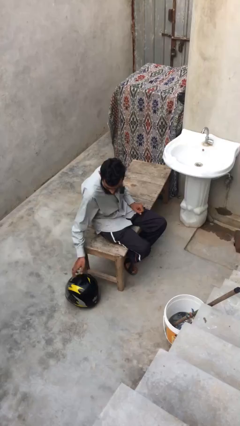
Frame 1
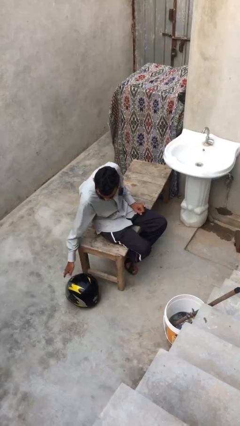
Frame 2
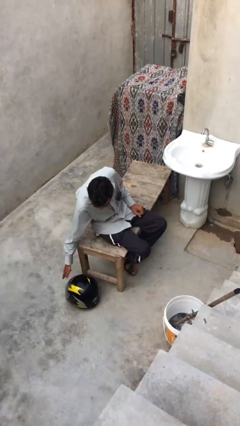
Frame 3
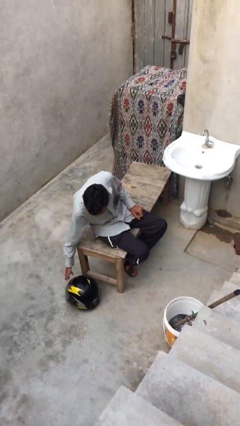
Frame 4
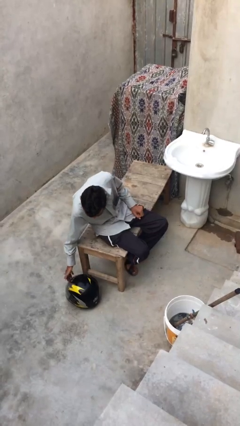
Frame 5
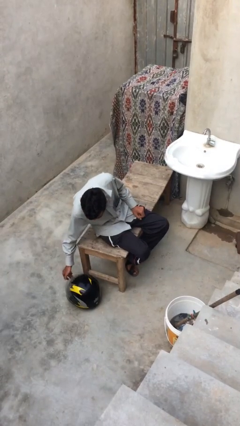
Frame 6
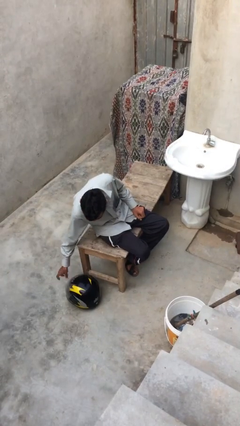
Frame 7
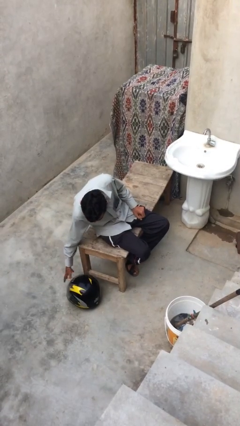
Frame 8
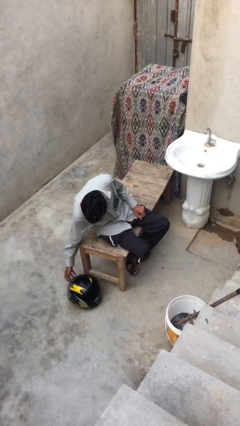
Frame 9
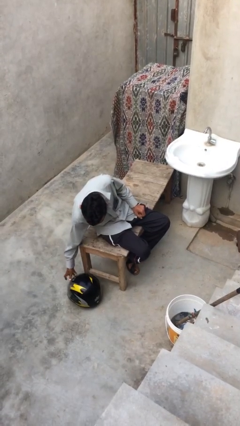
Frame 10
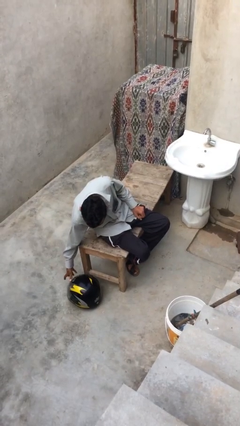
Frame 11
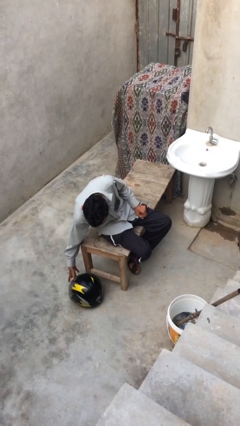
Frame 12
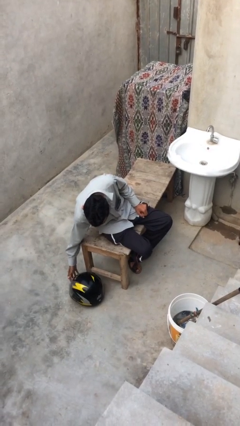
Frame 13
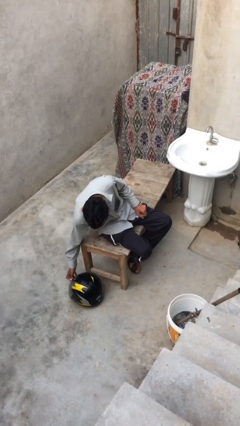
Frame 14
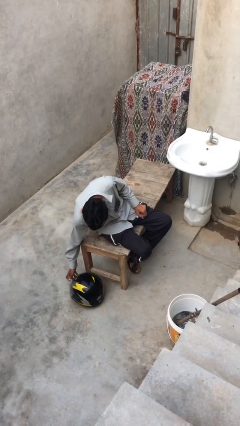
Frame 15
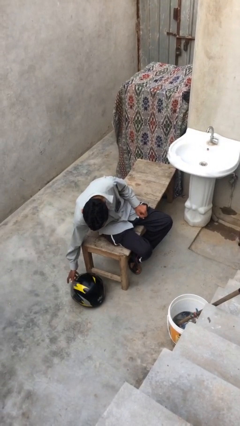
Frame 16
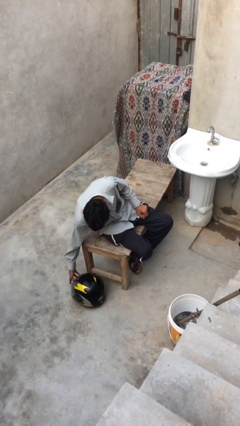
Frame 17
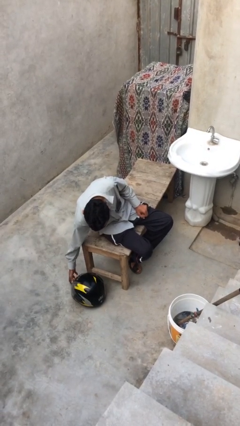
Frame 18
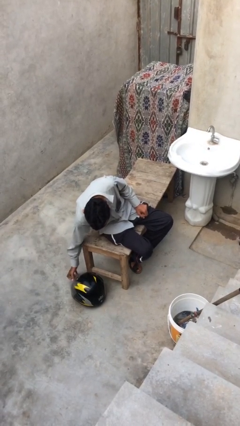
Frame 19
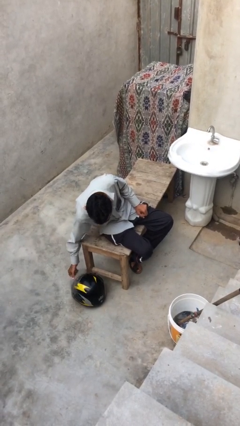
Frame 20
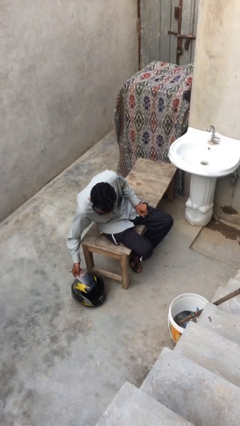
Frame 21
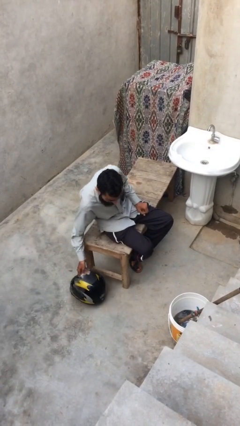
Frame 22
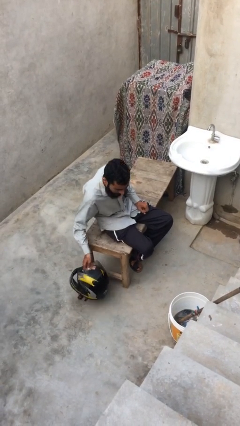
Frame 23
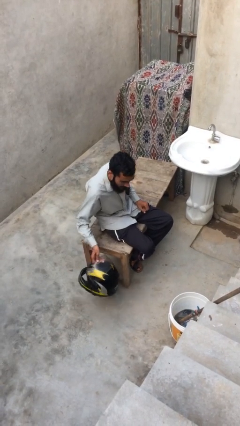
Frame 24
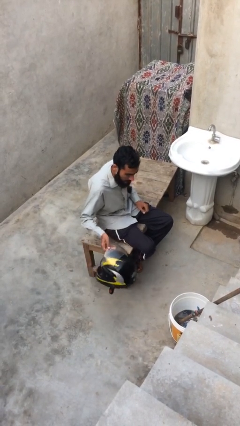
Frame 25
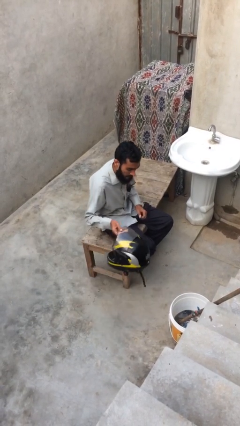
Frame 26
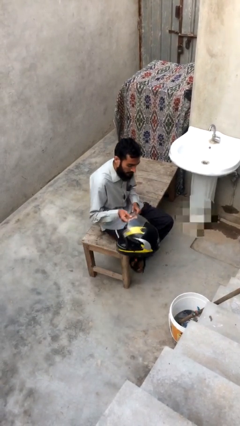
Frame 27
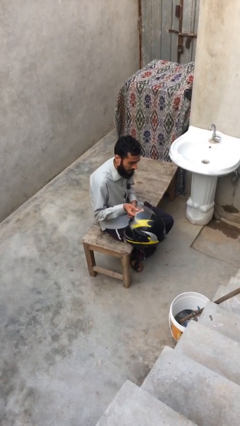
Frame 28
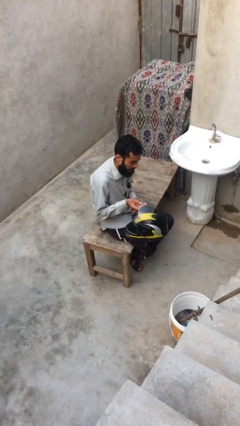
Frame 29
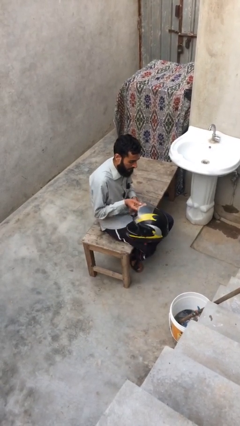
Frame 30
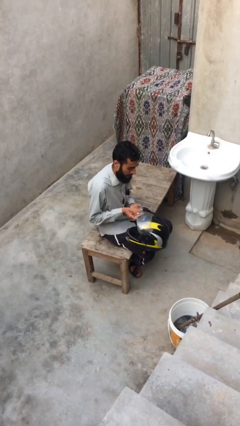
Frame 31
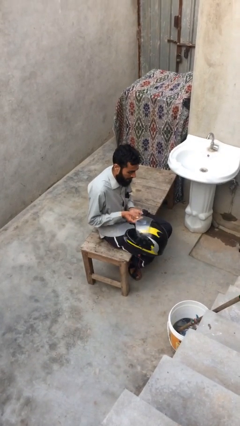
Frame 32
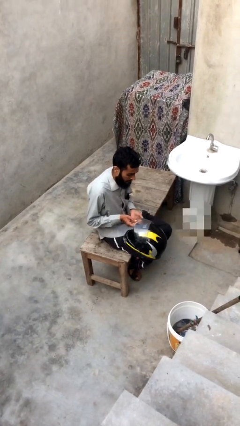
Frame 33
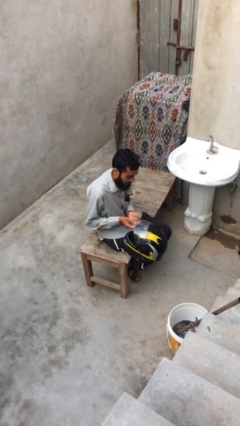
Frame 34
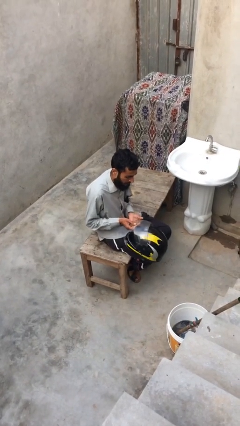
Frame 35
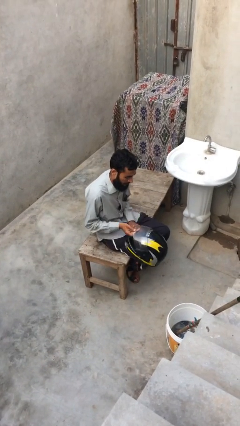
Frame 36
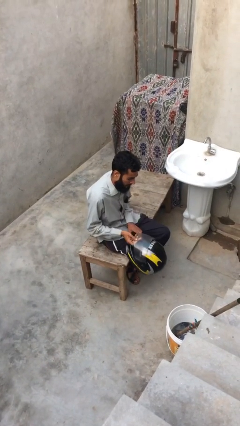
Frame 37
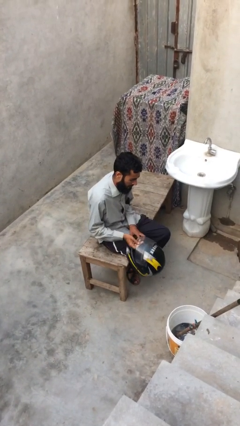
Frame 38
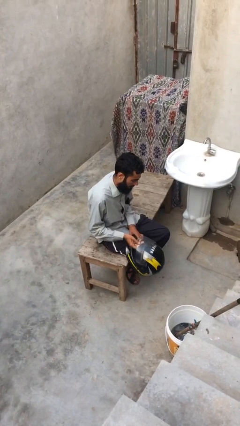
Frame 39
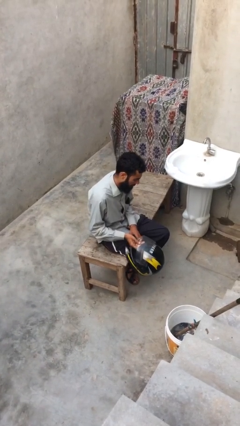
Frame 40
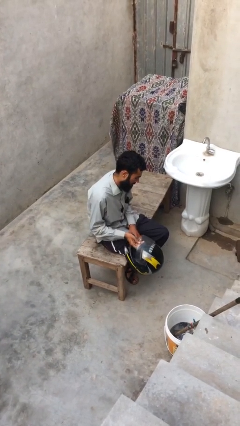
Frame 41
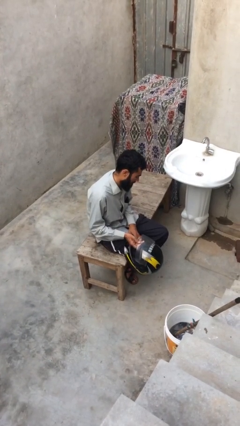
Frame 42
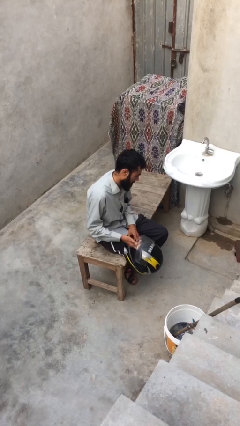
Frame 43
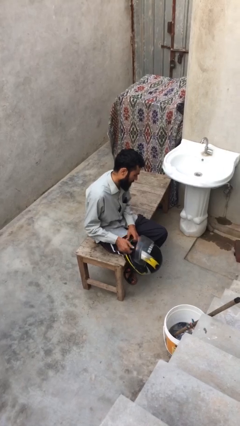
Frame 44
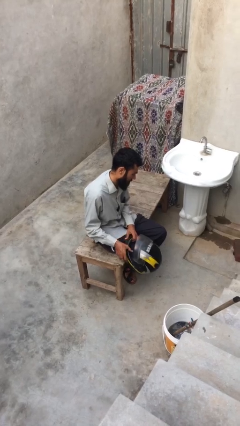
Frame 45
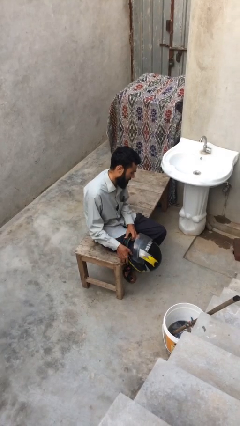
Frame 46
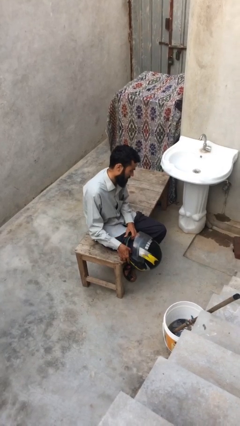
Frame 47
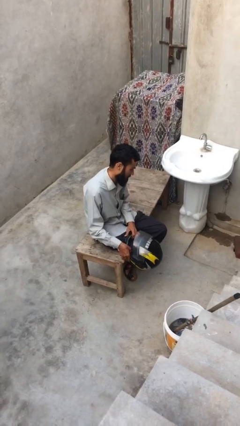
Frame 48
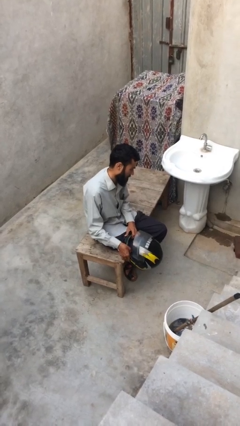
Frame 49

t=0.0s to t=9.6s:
person picks up object from floor

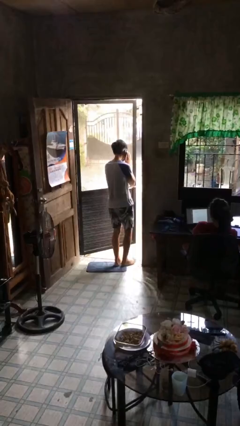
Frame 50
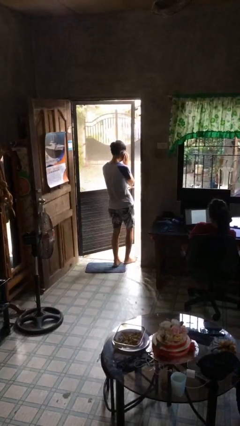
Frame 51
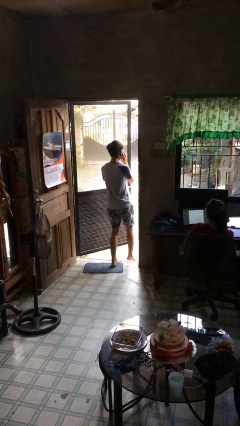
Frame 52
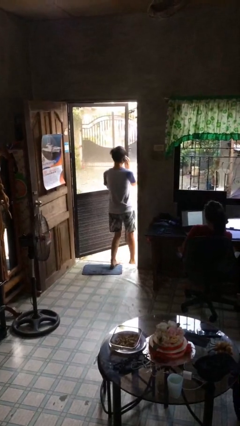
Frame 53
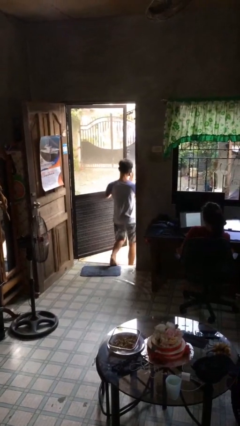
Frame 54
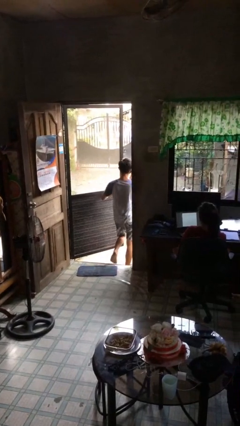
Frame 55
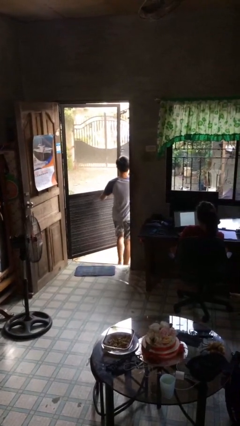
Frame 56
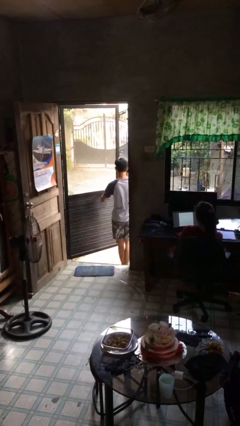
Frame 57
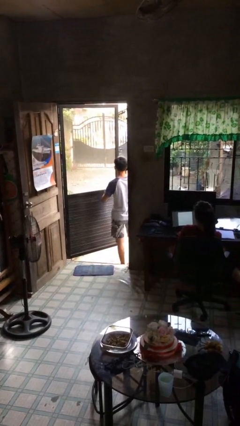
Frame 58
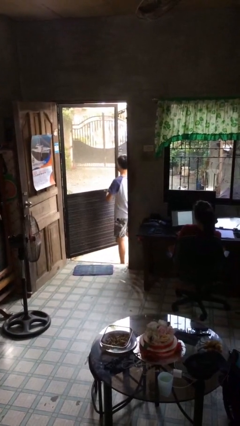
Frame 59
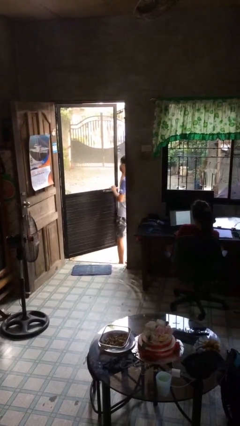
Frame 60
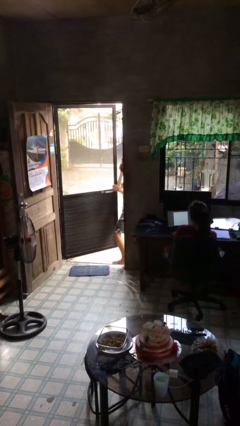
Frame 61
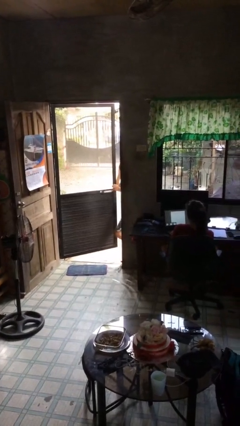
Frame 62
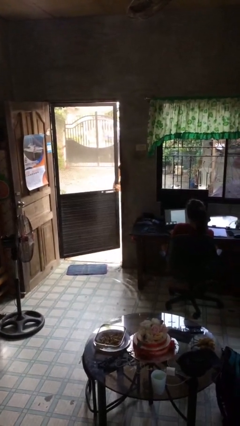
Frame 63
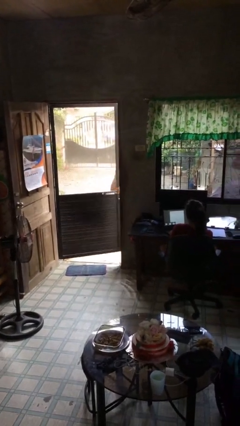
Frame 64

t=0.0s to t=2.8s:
person exits scene through structure

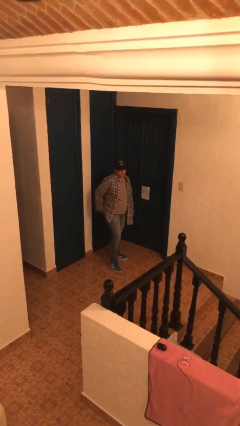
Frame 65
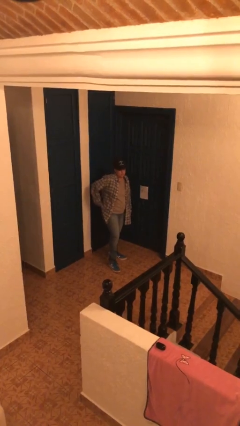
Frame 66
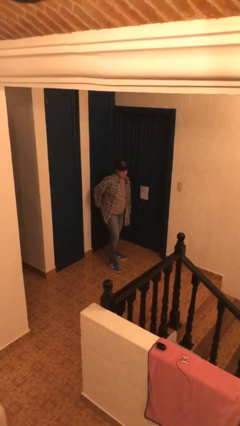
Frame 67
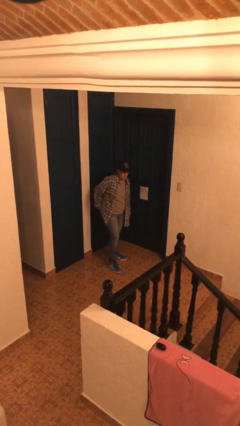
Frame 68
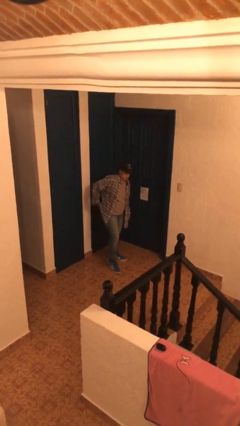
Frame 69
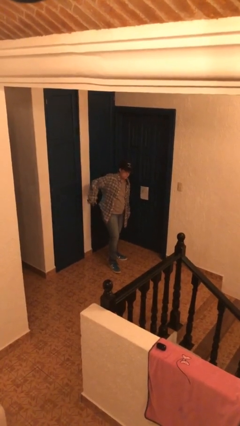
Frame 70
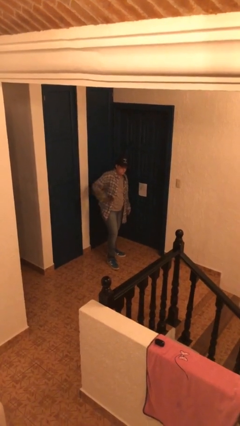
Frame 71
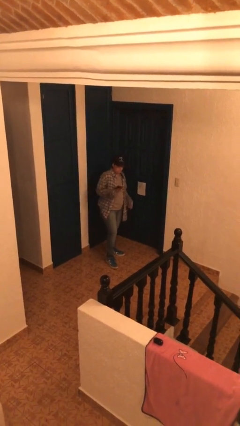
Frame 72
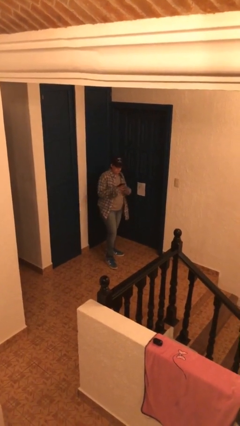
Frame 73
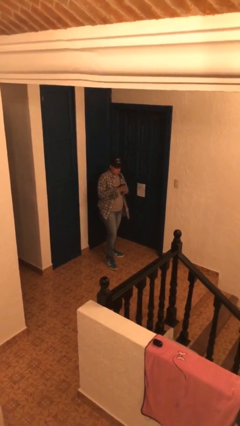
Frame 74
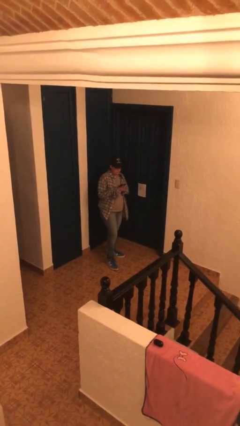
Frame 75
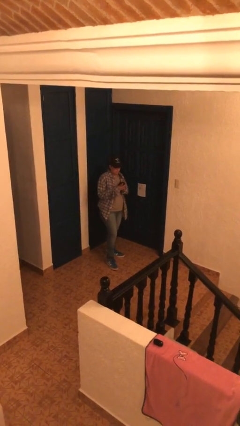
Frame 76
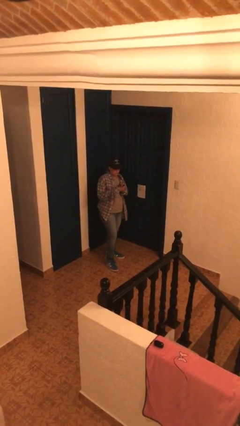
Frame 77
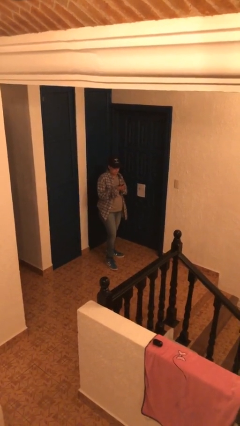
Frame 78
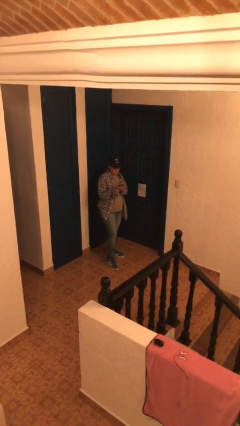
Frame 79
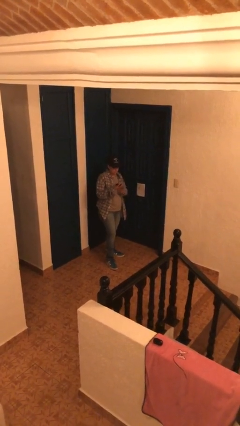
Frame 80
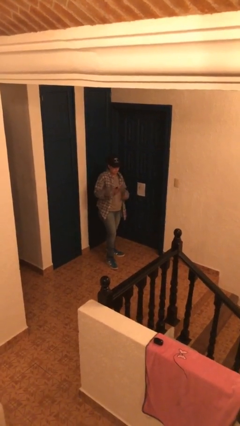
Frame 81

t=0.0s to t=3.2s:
person takes phone from pocket

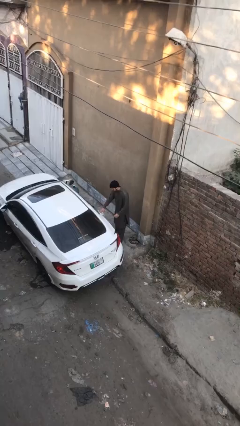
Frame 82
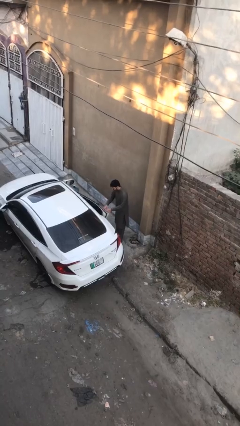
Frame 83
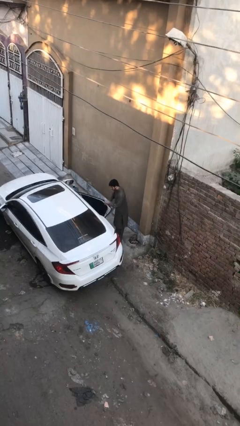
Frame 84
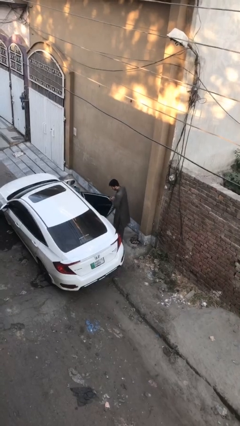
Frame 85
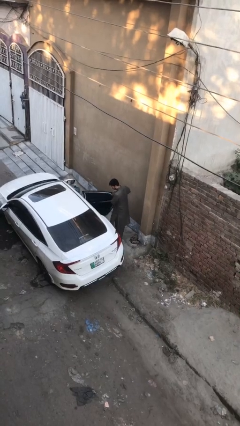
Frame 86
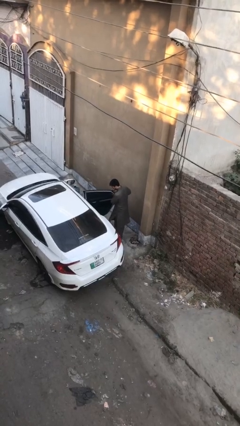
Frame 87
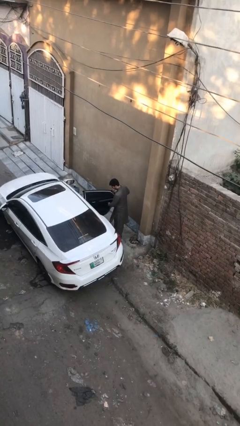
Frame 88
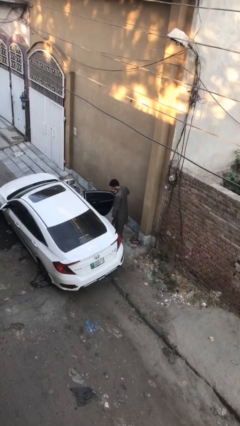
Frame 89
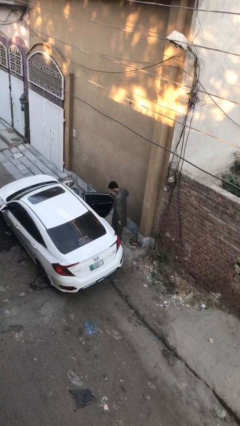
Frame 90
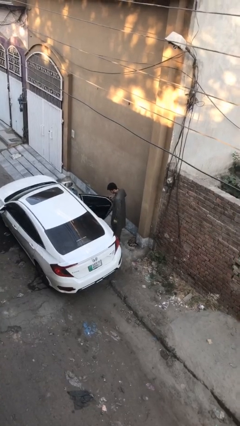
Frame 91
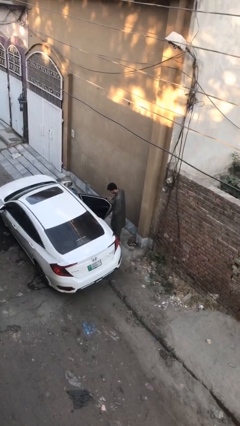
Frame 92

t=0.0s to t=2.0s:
person opens car door

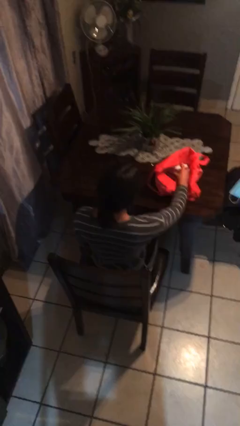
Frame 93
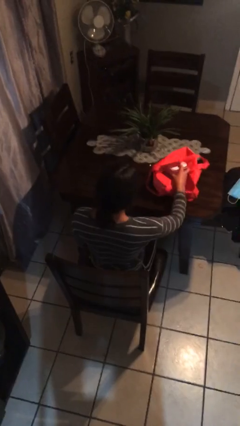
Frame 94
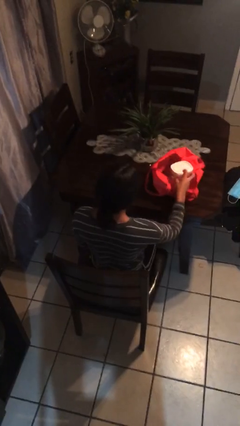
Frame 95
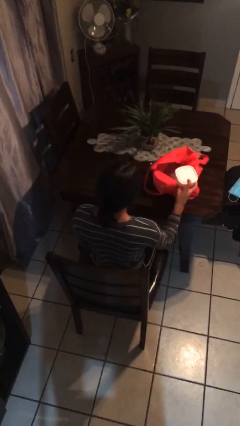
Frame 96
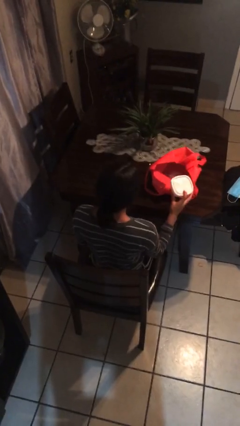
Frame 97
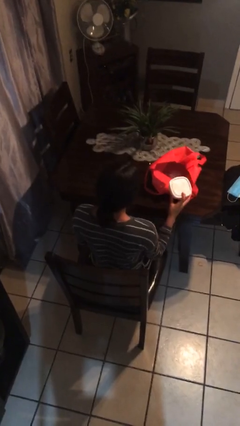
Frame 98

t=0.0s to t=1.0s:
person takes object from bag
